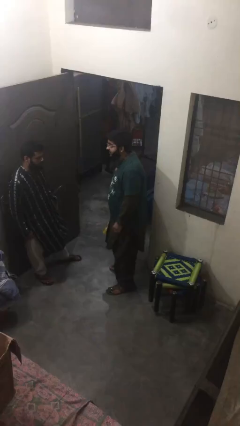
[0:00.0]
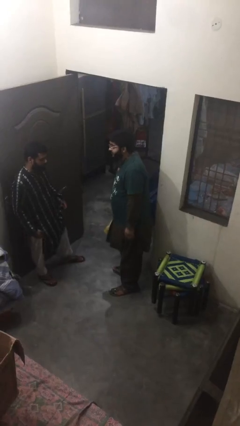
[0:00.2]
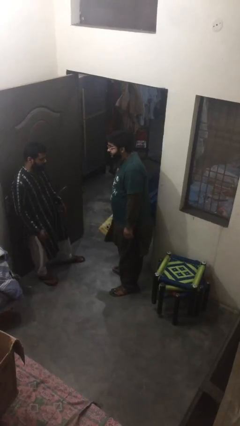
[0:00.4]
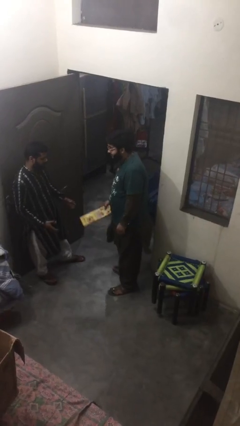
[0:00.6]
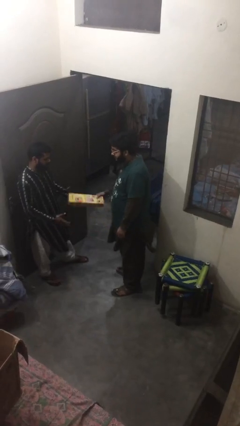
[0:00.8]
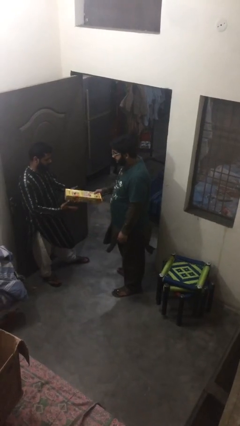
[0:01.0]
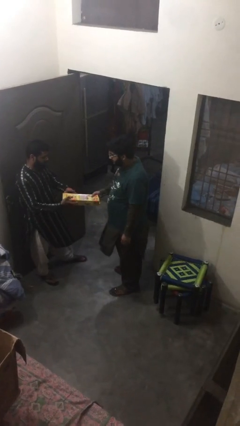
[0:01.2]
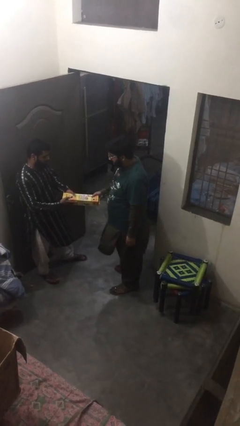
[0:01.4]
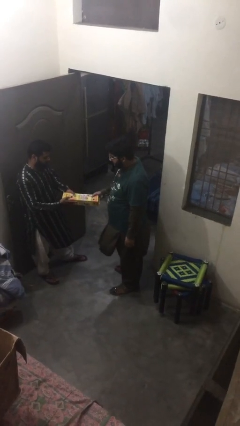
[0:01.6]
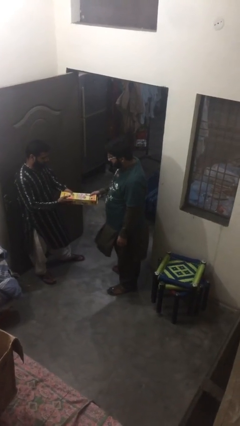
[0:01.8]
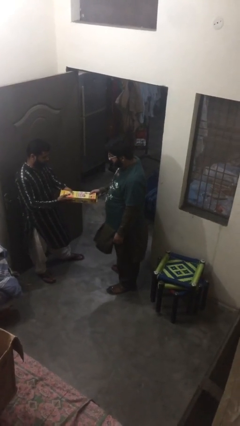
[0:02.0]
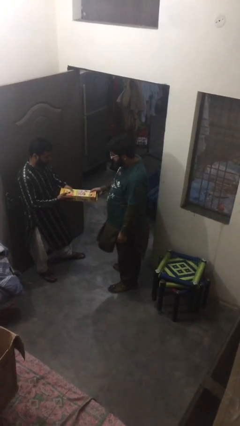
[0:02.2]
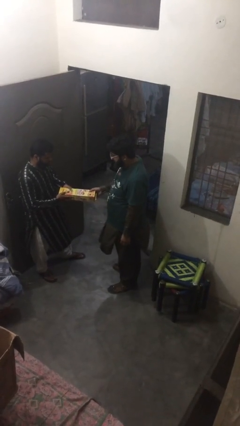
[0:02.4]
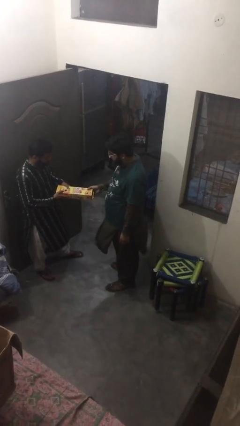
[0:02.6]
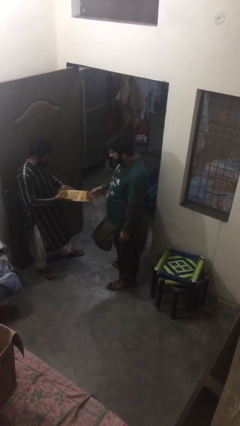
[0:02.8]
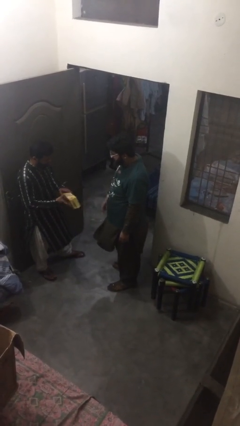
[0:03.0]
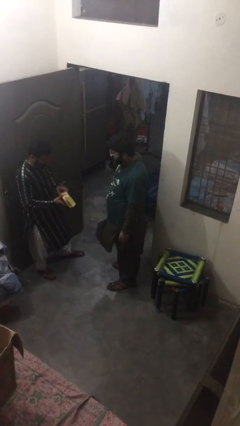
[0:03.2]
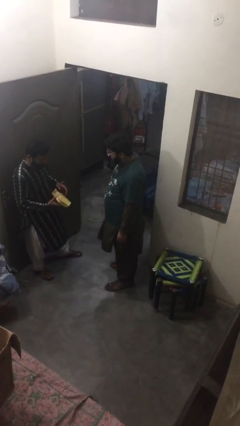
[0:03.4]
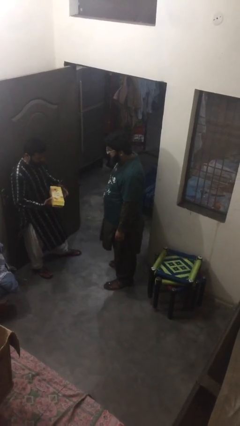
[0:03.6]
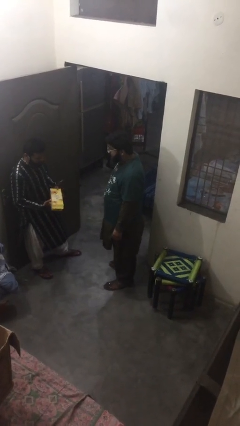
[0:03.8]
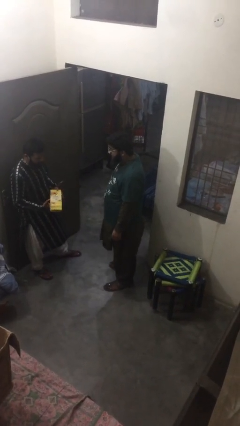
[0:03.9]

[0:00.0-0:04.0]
person transfers object to person

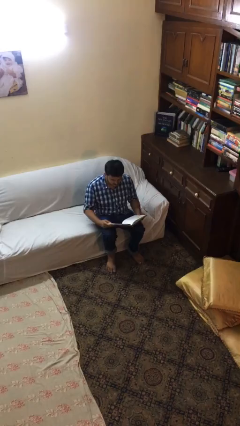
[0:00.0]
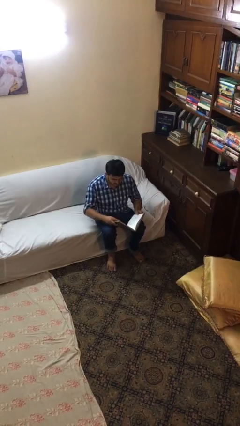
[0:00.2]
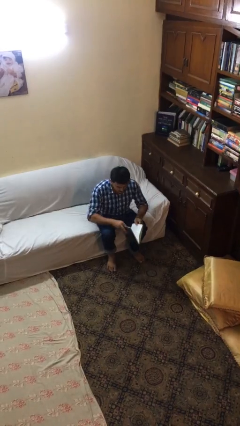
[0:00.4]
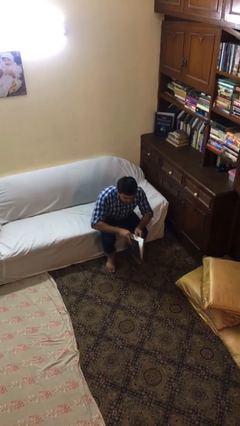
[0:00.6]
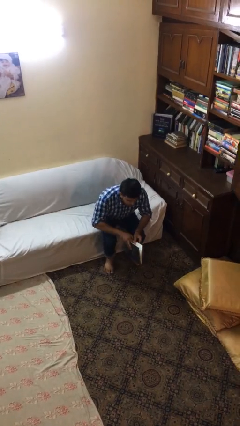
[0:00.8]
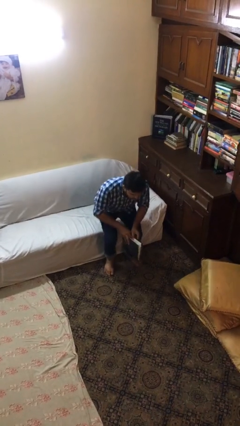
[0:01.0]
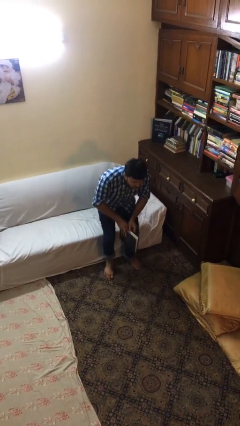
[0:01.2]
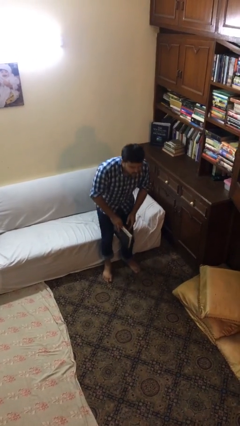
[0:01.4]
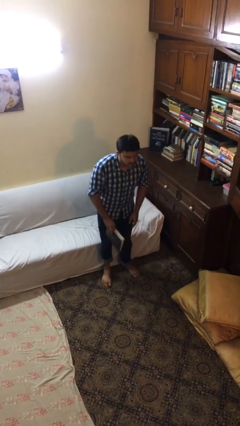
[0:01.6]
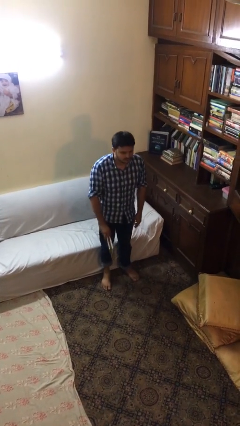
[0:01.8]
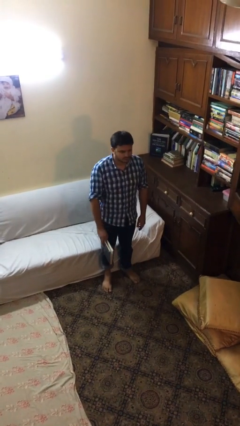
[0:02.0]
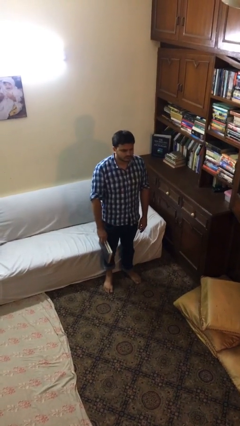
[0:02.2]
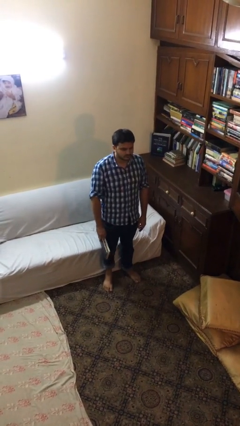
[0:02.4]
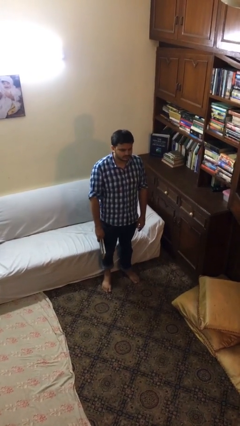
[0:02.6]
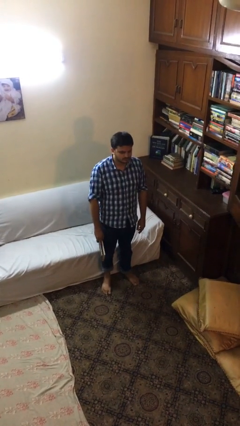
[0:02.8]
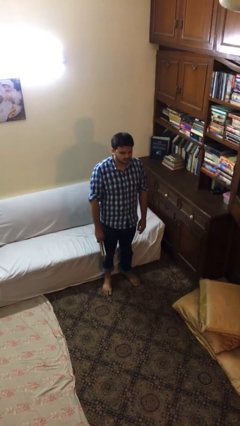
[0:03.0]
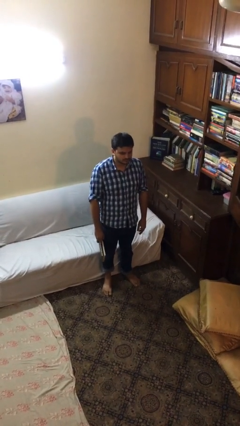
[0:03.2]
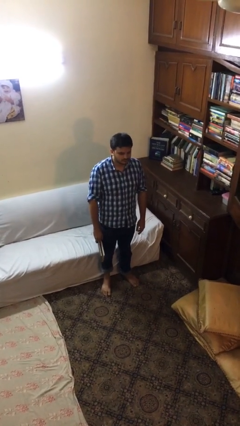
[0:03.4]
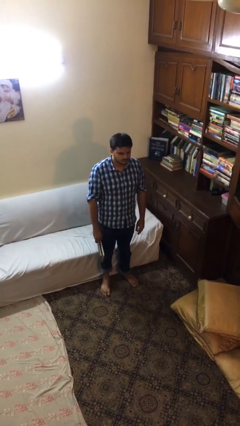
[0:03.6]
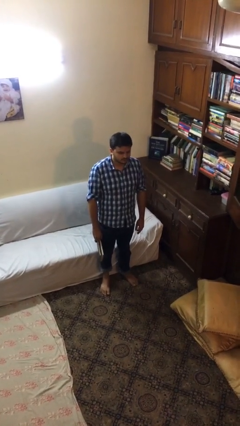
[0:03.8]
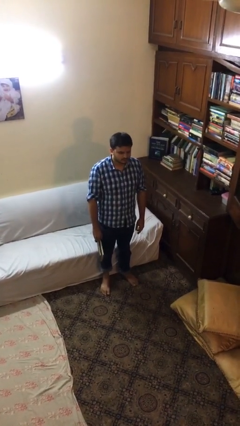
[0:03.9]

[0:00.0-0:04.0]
person stands up

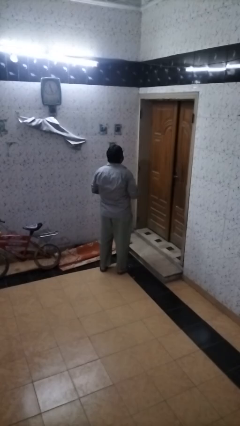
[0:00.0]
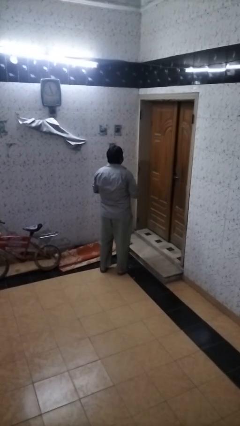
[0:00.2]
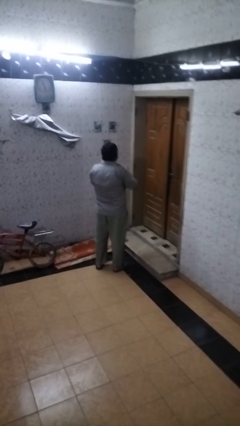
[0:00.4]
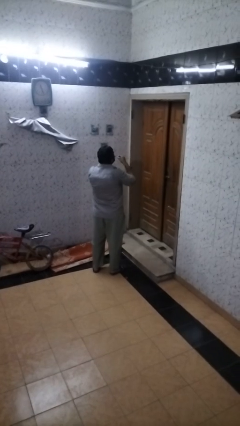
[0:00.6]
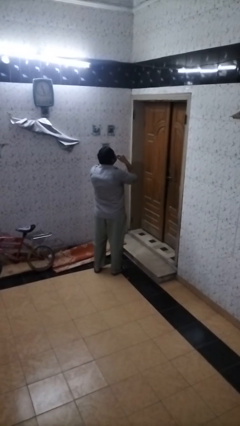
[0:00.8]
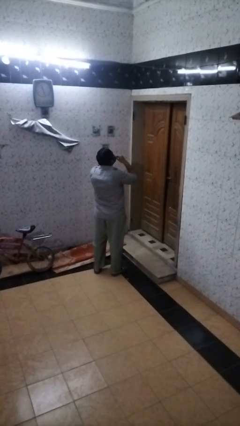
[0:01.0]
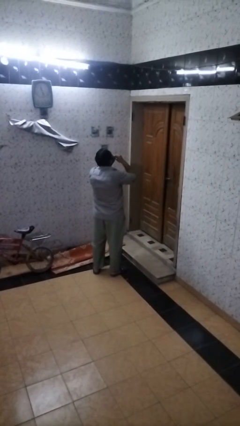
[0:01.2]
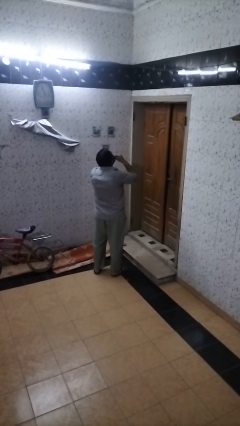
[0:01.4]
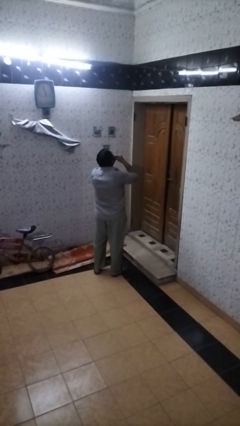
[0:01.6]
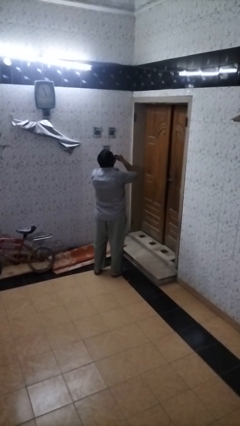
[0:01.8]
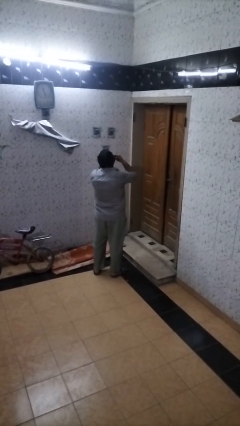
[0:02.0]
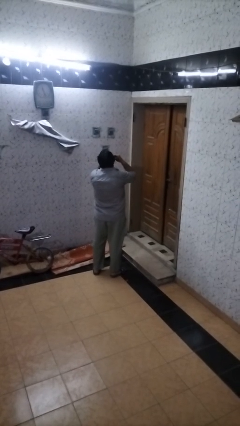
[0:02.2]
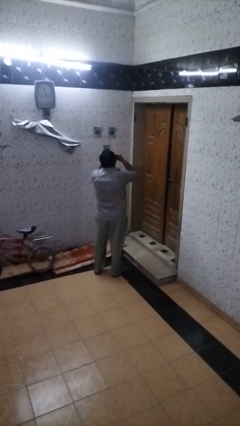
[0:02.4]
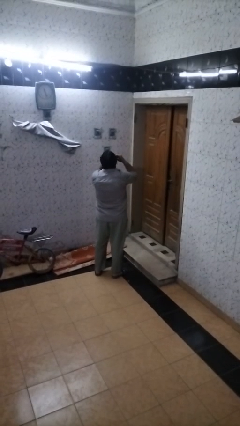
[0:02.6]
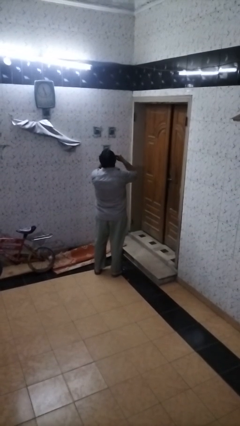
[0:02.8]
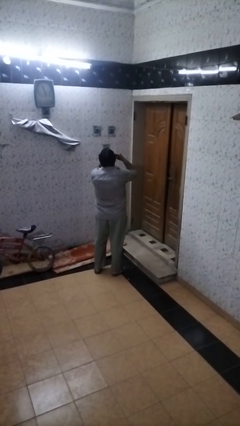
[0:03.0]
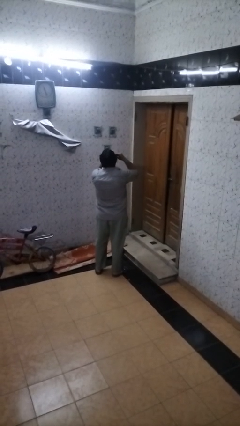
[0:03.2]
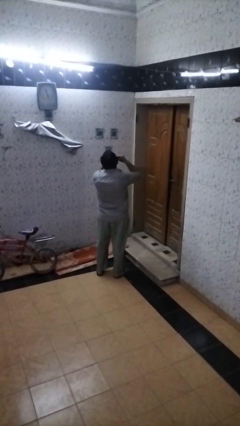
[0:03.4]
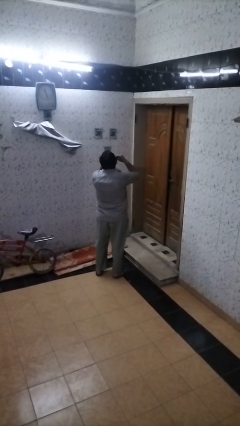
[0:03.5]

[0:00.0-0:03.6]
person flosses

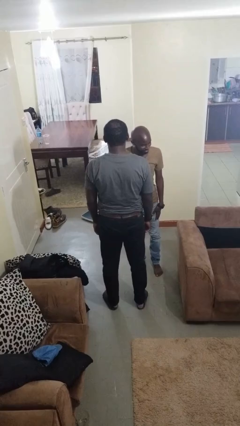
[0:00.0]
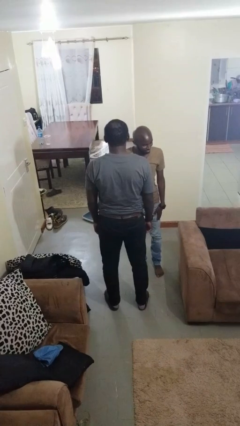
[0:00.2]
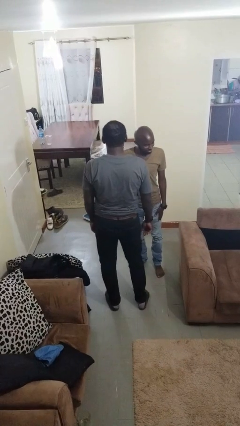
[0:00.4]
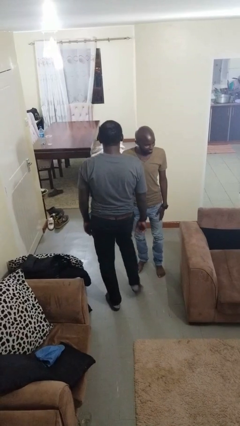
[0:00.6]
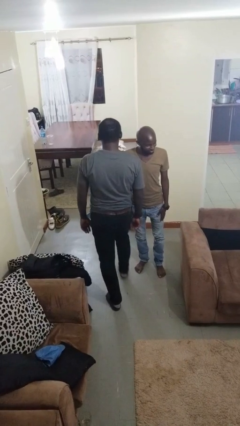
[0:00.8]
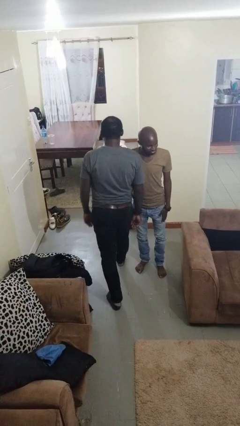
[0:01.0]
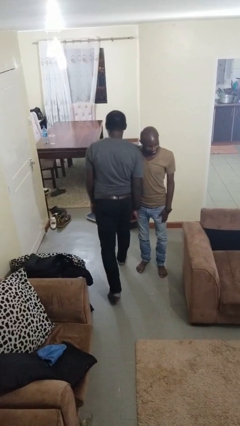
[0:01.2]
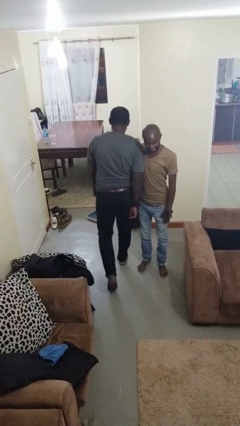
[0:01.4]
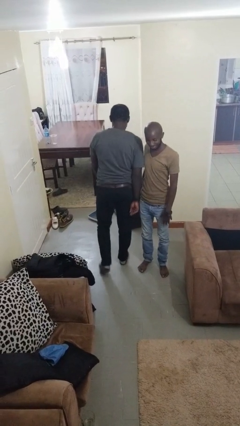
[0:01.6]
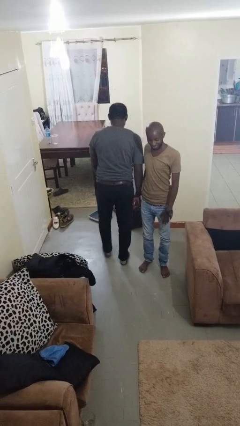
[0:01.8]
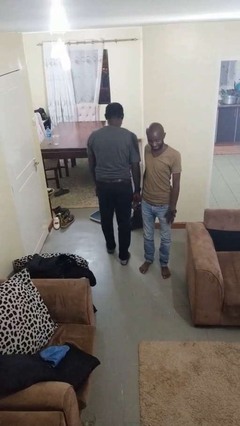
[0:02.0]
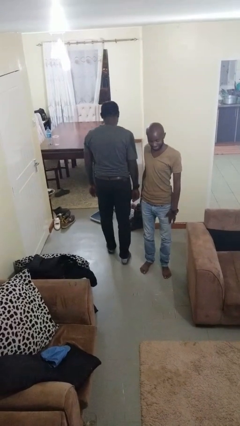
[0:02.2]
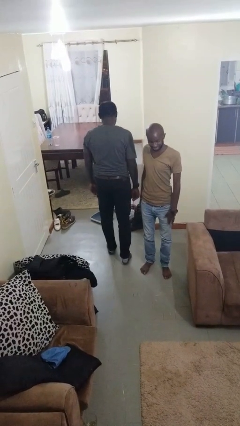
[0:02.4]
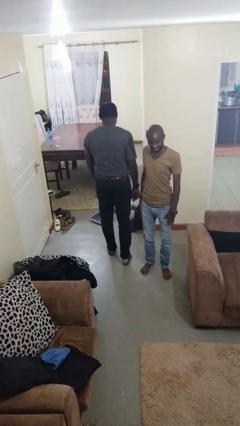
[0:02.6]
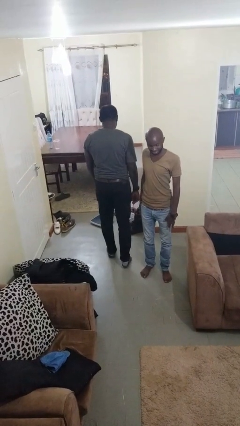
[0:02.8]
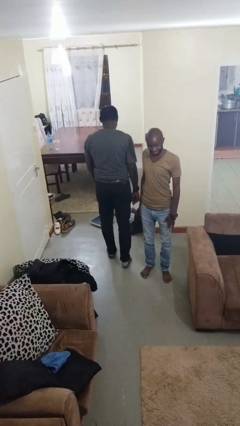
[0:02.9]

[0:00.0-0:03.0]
person bumps into person

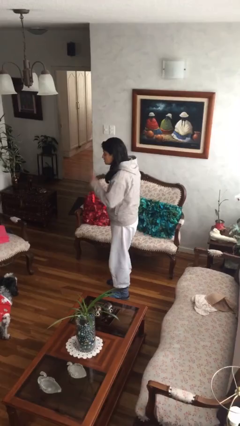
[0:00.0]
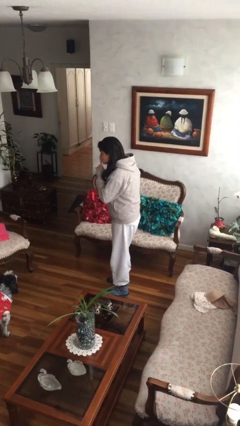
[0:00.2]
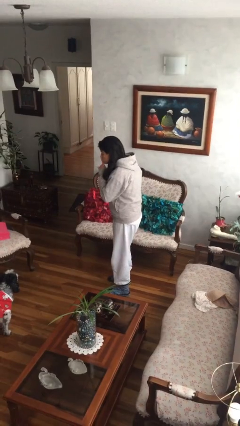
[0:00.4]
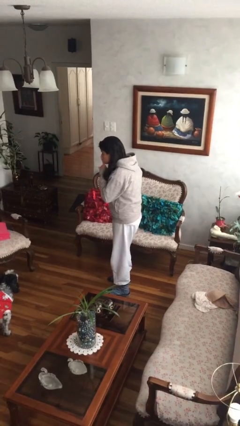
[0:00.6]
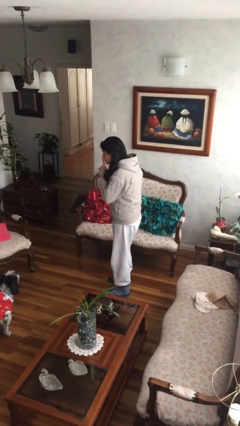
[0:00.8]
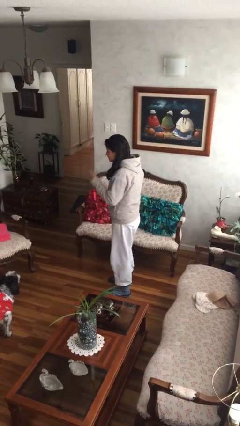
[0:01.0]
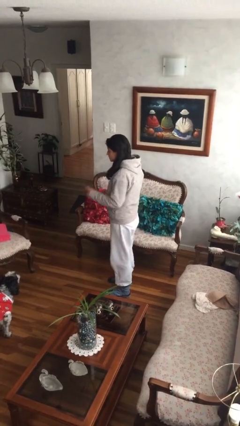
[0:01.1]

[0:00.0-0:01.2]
person gestures be quiet

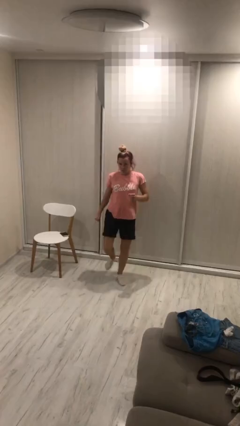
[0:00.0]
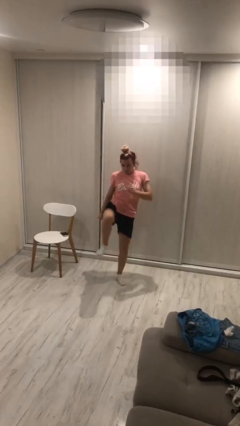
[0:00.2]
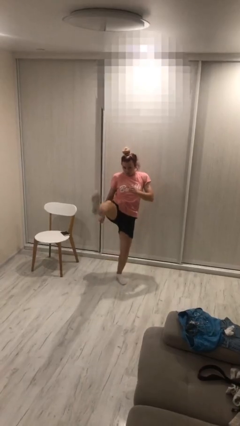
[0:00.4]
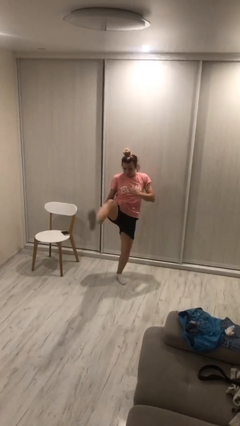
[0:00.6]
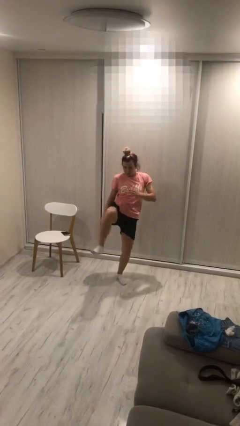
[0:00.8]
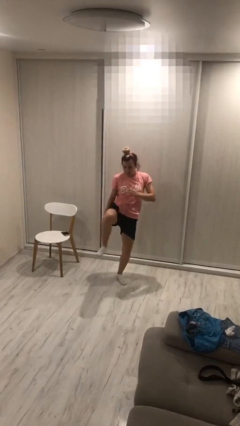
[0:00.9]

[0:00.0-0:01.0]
person karate kicks

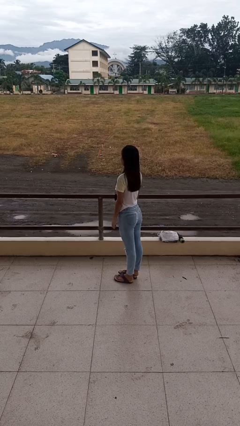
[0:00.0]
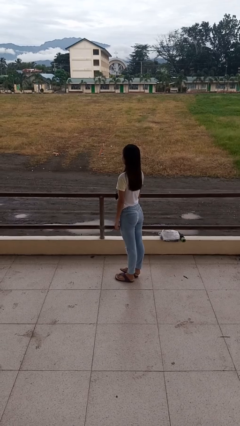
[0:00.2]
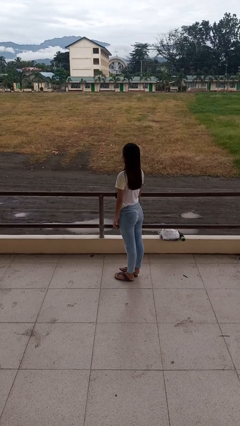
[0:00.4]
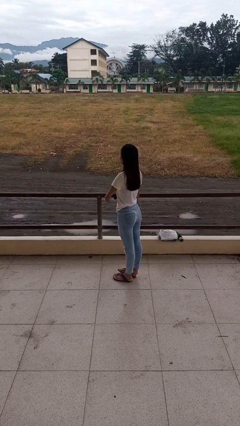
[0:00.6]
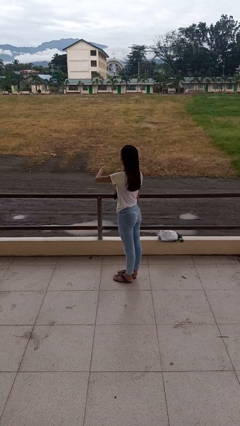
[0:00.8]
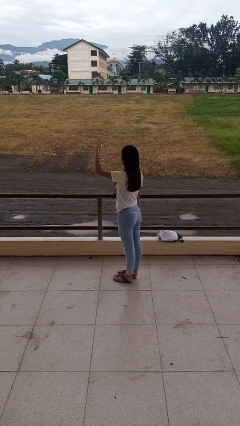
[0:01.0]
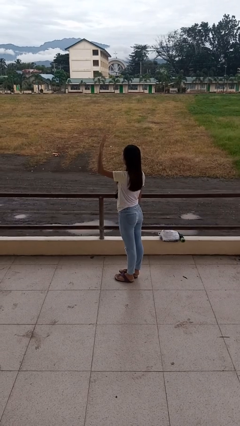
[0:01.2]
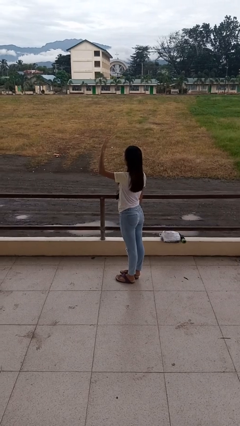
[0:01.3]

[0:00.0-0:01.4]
person gestures swipe up
